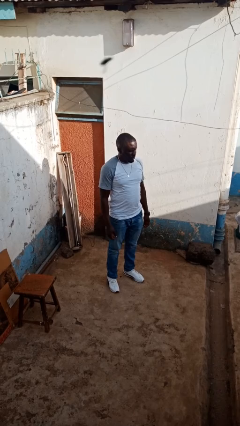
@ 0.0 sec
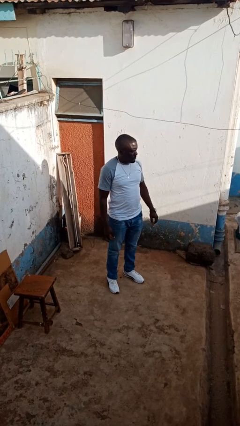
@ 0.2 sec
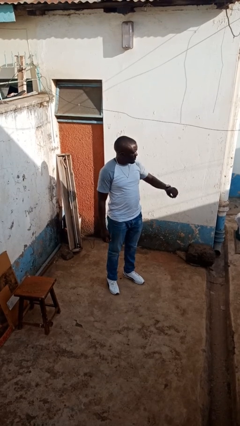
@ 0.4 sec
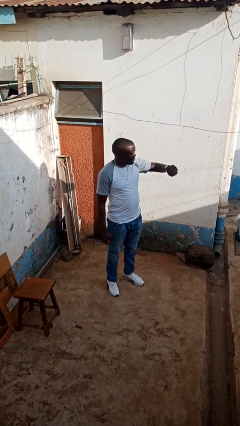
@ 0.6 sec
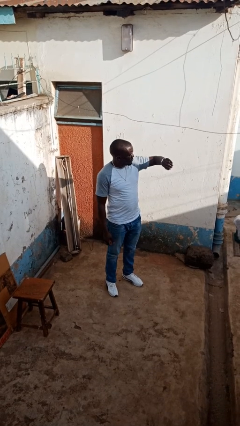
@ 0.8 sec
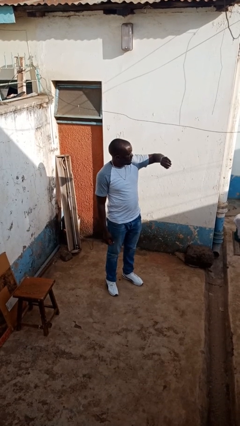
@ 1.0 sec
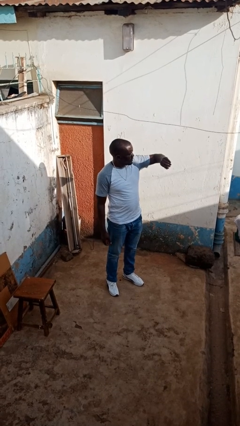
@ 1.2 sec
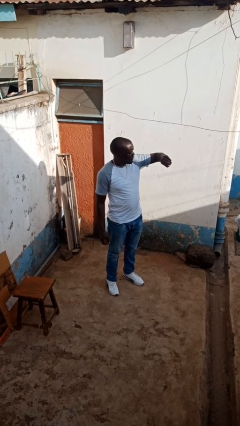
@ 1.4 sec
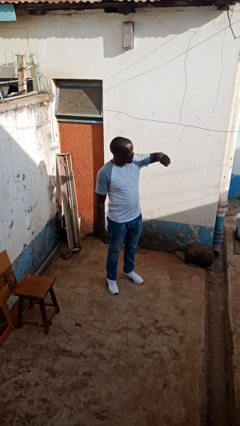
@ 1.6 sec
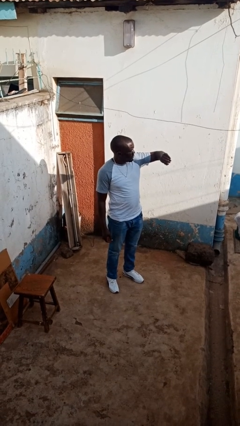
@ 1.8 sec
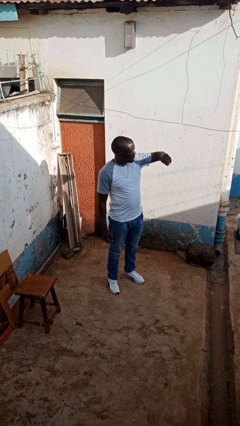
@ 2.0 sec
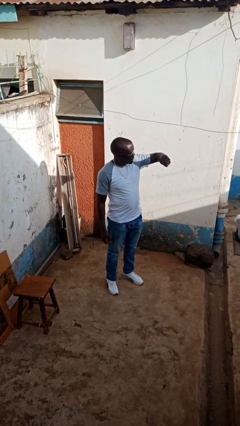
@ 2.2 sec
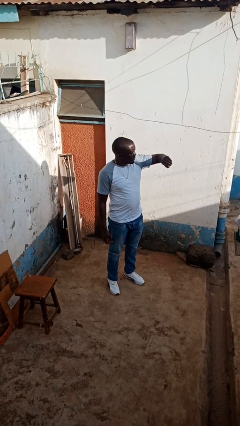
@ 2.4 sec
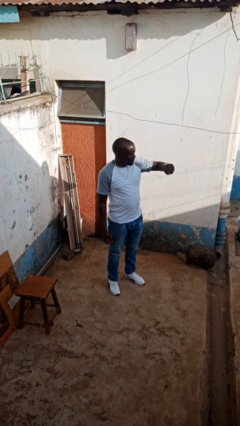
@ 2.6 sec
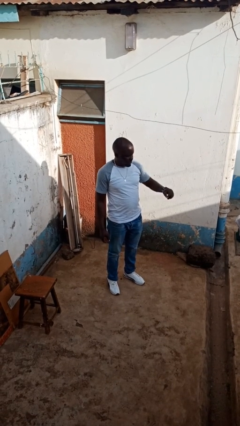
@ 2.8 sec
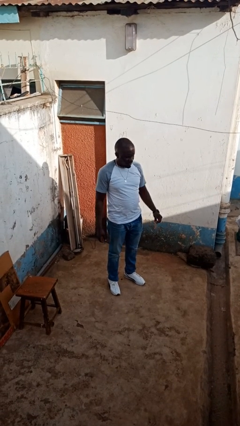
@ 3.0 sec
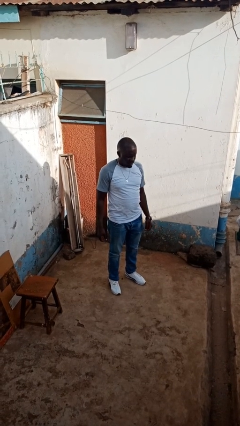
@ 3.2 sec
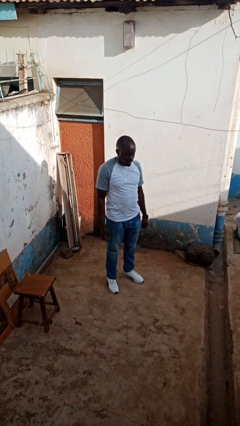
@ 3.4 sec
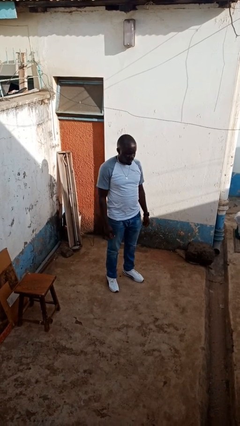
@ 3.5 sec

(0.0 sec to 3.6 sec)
person looks at wristwatch

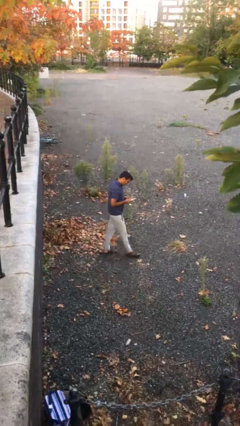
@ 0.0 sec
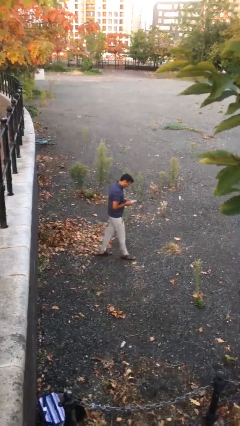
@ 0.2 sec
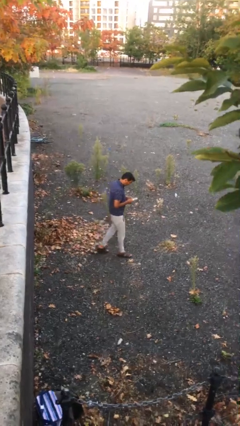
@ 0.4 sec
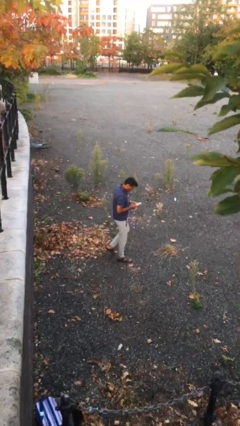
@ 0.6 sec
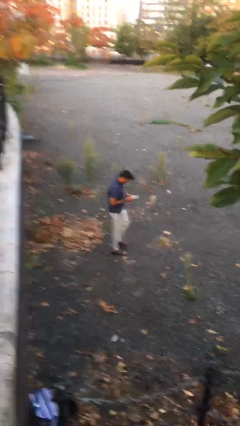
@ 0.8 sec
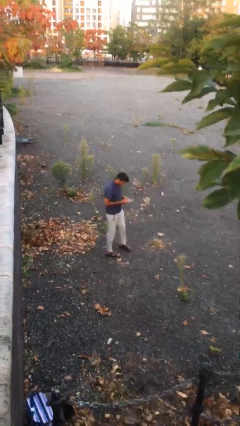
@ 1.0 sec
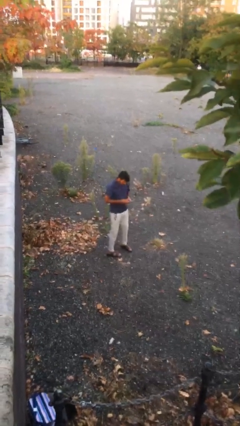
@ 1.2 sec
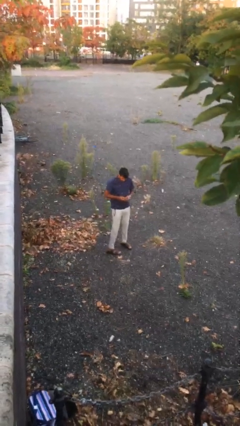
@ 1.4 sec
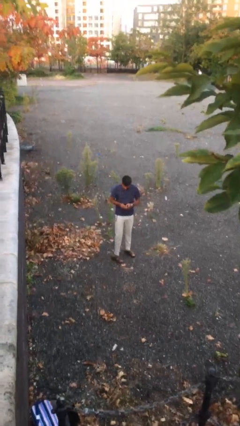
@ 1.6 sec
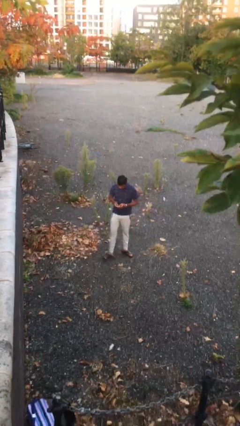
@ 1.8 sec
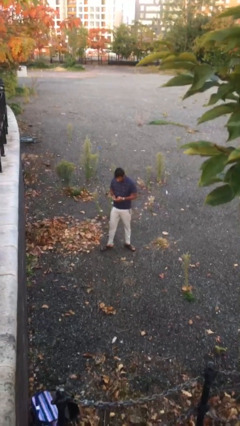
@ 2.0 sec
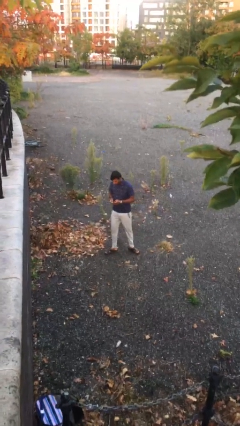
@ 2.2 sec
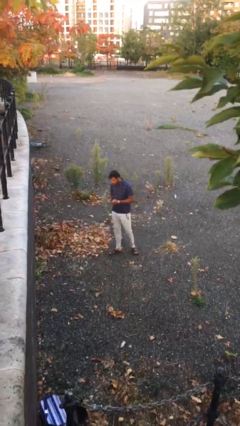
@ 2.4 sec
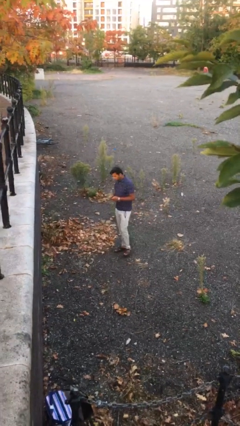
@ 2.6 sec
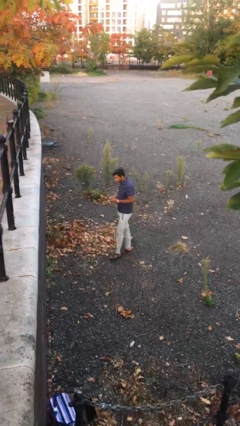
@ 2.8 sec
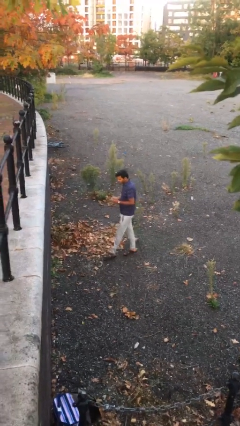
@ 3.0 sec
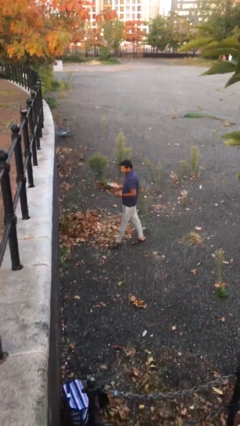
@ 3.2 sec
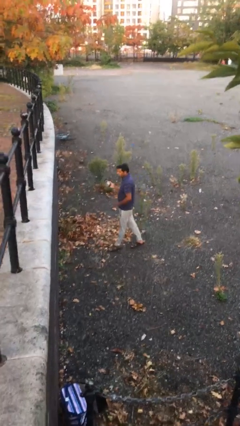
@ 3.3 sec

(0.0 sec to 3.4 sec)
person texts on phone

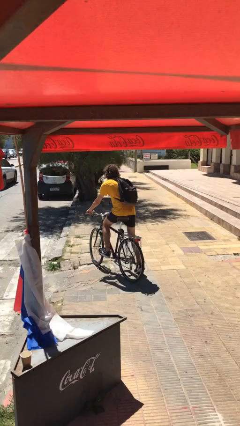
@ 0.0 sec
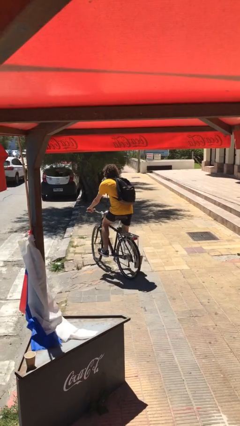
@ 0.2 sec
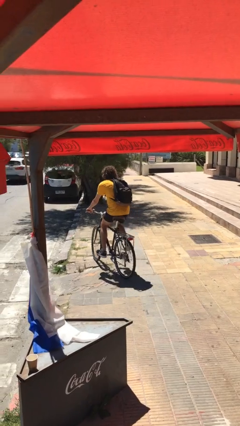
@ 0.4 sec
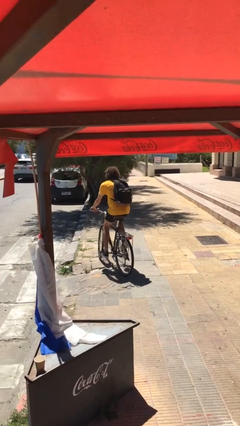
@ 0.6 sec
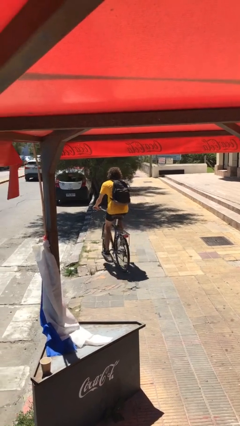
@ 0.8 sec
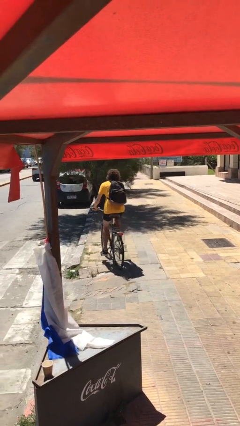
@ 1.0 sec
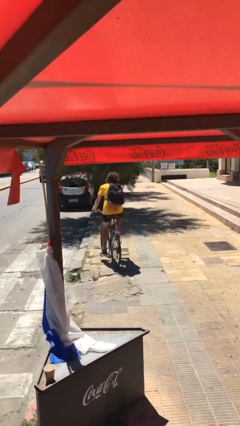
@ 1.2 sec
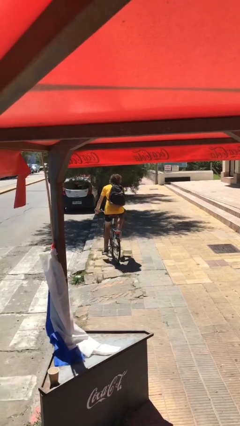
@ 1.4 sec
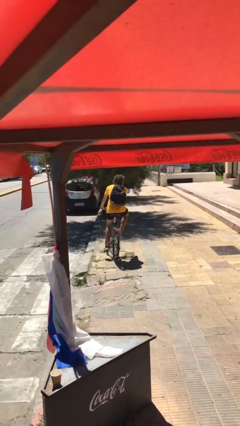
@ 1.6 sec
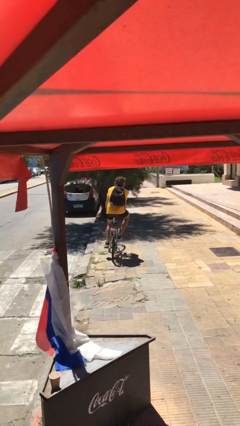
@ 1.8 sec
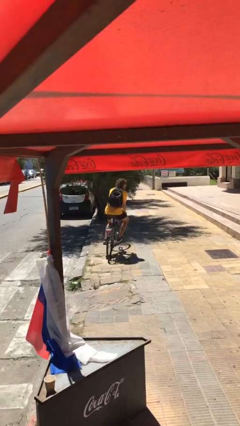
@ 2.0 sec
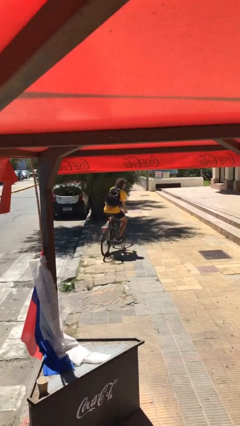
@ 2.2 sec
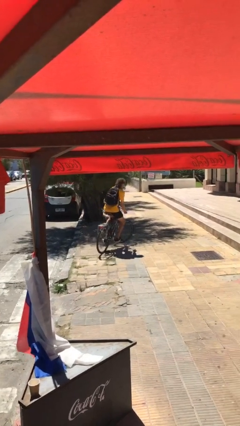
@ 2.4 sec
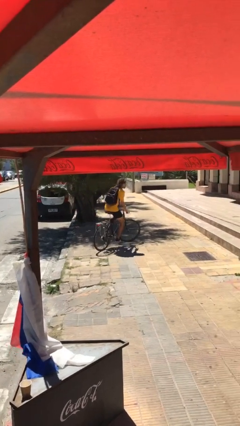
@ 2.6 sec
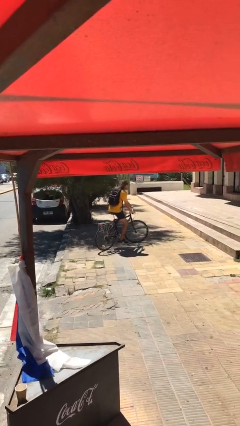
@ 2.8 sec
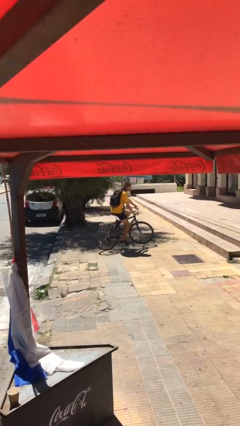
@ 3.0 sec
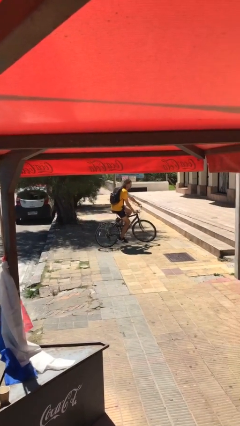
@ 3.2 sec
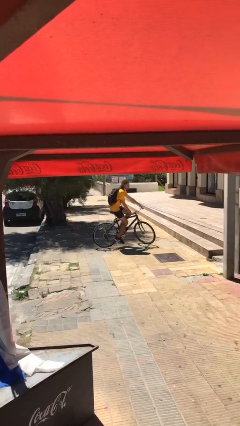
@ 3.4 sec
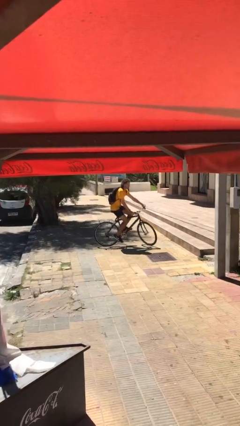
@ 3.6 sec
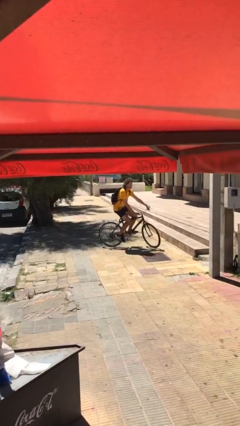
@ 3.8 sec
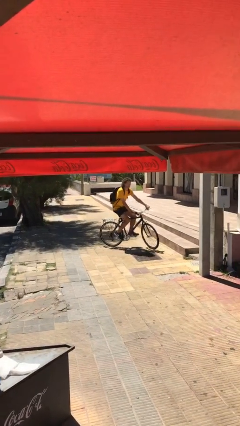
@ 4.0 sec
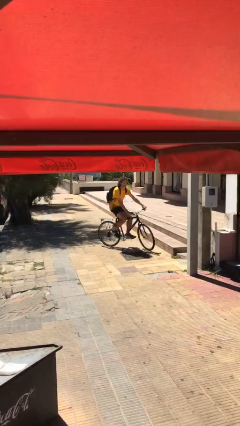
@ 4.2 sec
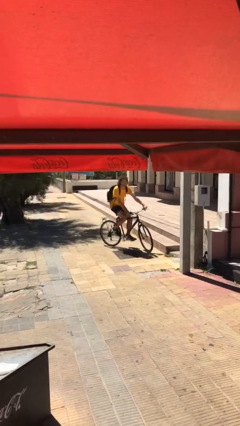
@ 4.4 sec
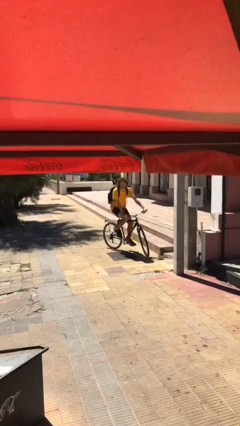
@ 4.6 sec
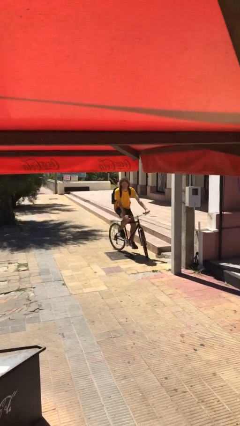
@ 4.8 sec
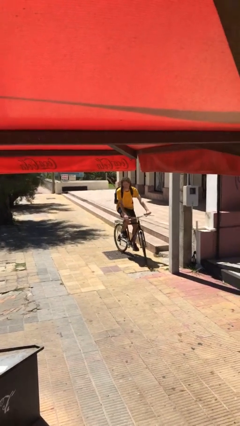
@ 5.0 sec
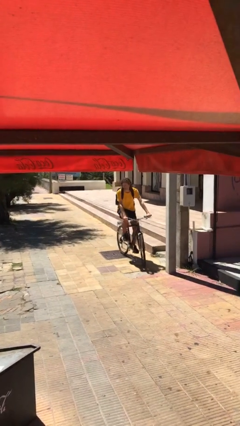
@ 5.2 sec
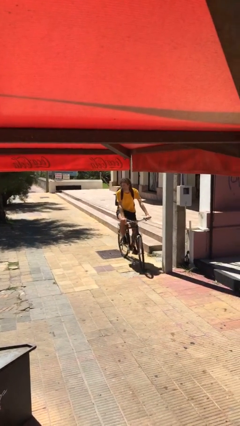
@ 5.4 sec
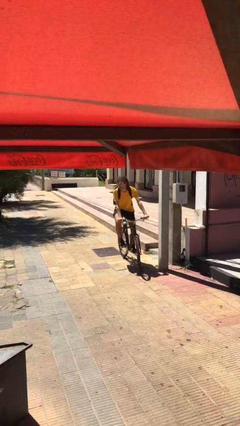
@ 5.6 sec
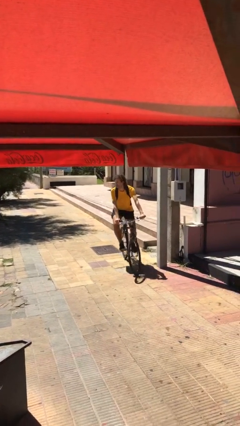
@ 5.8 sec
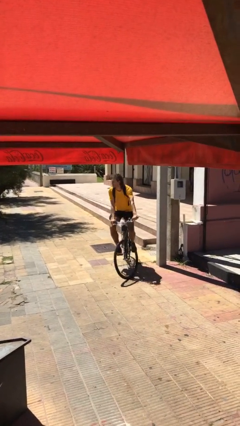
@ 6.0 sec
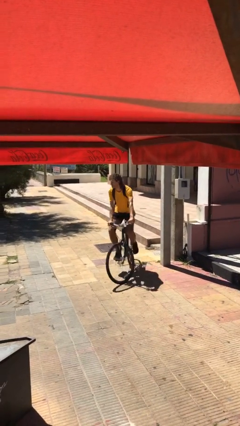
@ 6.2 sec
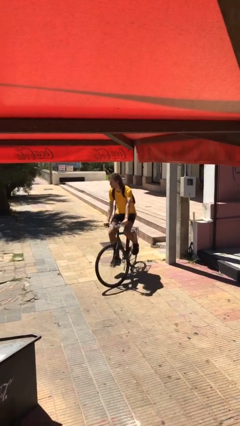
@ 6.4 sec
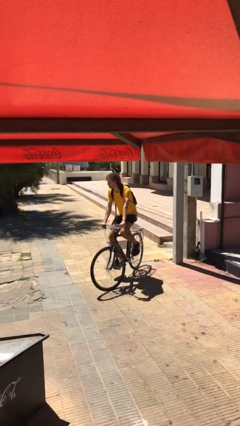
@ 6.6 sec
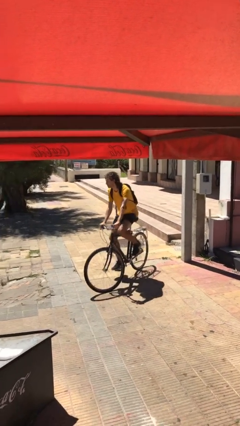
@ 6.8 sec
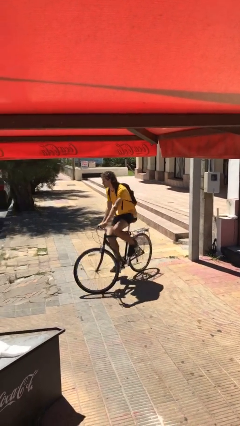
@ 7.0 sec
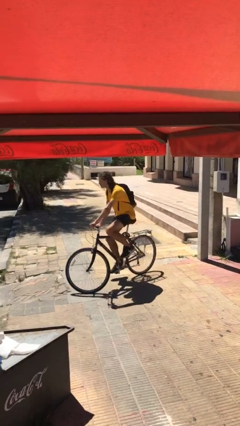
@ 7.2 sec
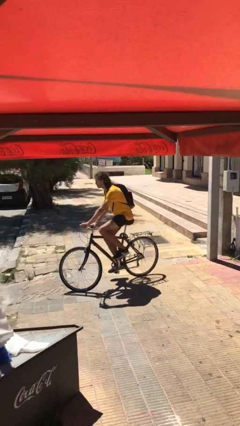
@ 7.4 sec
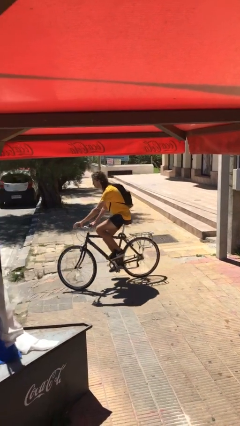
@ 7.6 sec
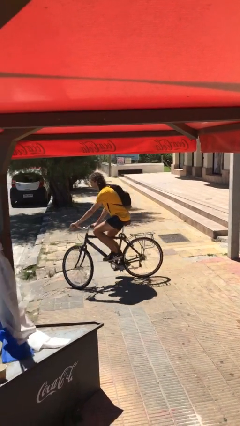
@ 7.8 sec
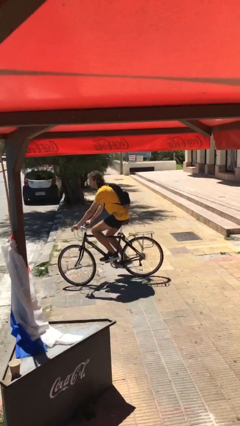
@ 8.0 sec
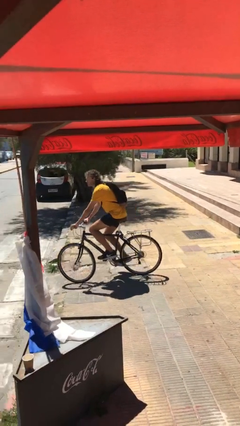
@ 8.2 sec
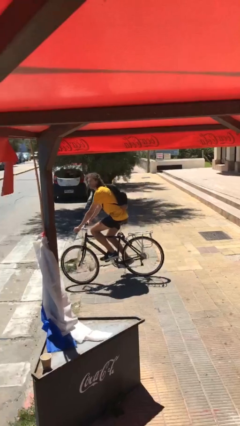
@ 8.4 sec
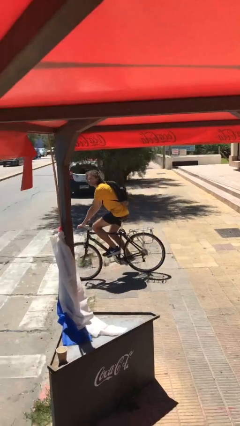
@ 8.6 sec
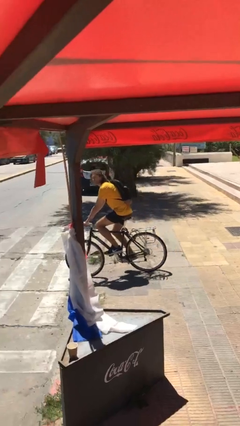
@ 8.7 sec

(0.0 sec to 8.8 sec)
person rides bicycle

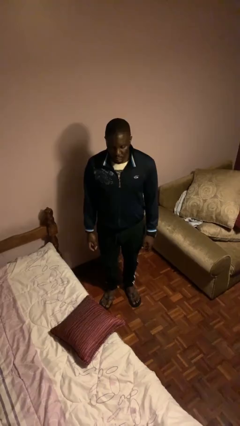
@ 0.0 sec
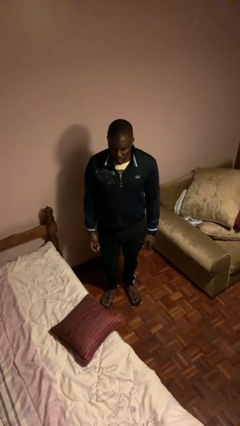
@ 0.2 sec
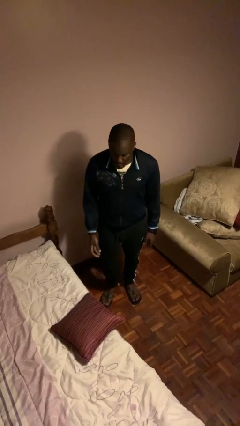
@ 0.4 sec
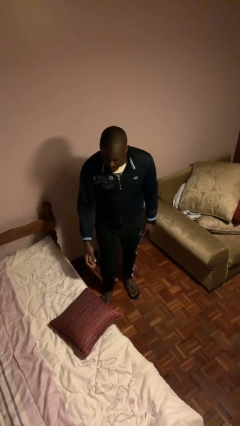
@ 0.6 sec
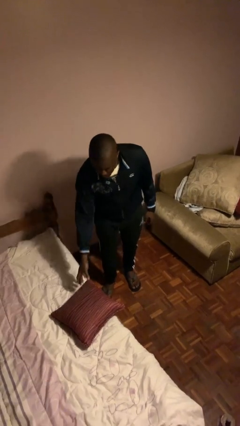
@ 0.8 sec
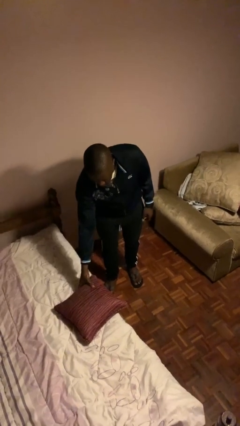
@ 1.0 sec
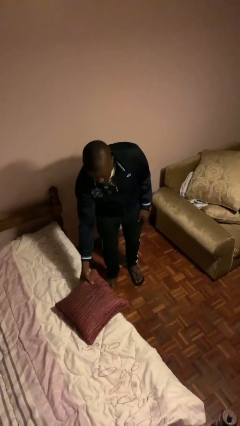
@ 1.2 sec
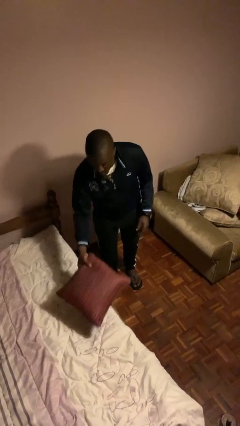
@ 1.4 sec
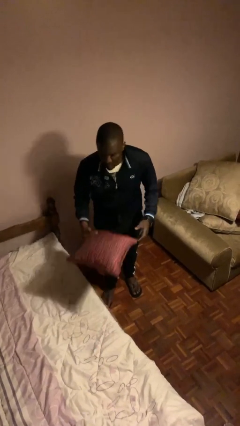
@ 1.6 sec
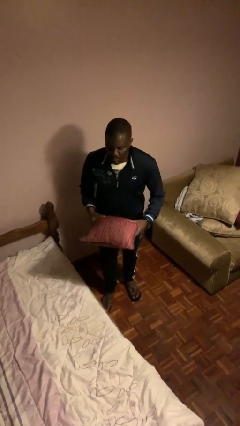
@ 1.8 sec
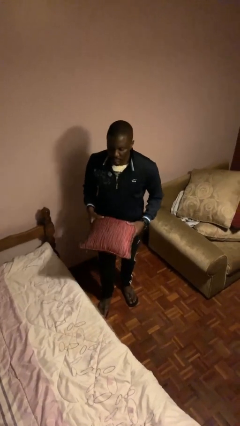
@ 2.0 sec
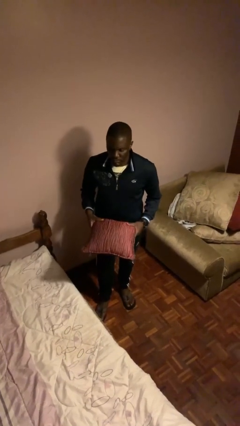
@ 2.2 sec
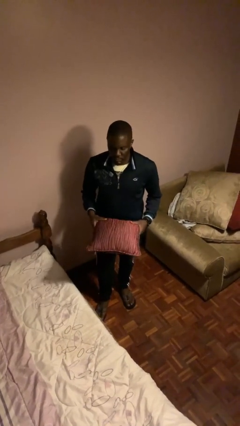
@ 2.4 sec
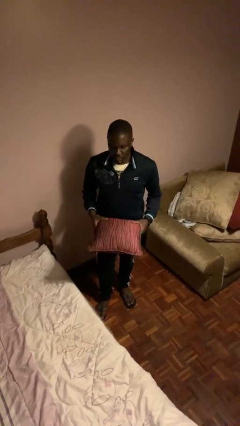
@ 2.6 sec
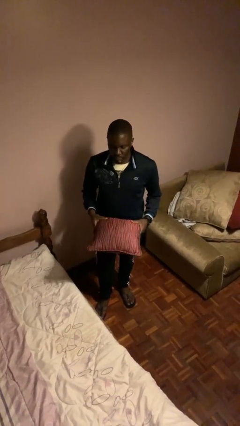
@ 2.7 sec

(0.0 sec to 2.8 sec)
person picks up object from bed
